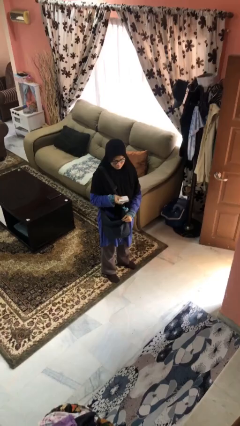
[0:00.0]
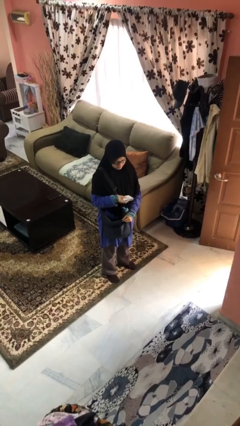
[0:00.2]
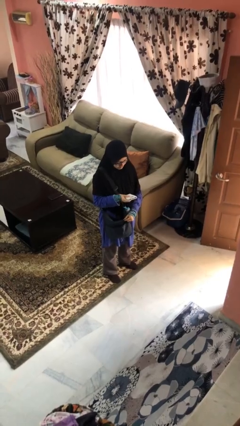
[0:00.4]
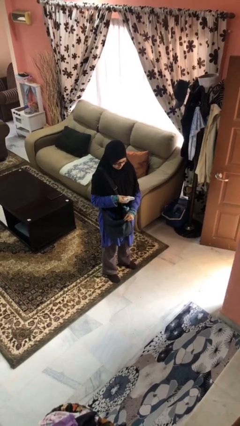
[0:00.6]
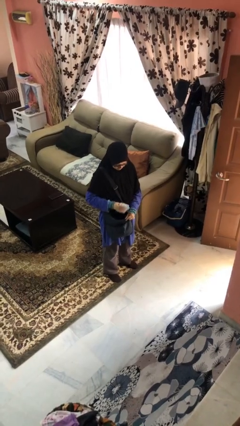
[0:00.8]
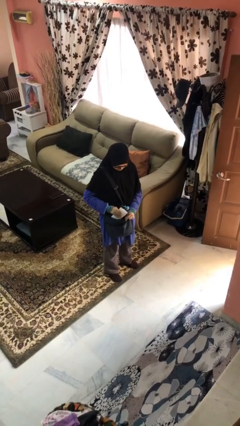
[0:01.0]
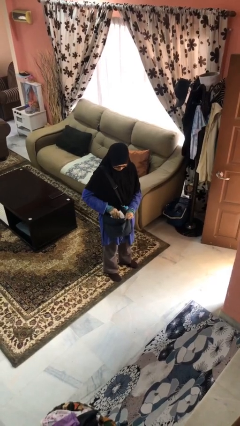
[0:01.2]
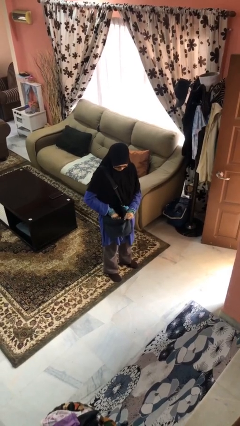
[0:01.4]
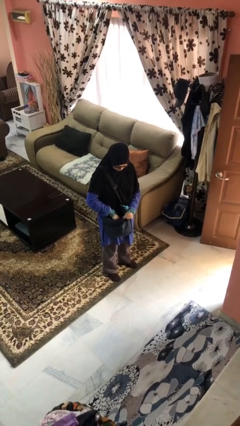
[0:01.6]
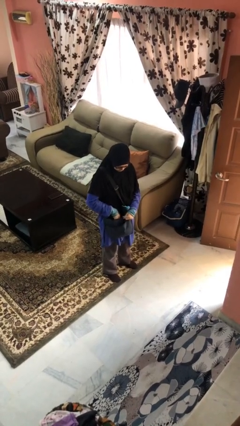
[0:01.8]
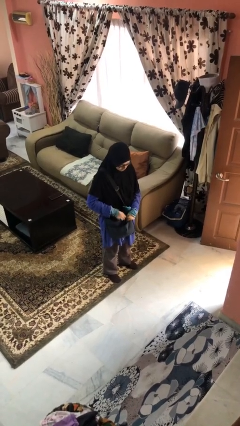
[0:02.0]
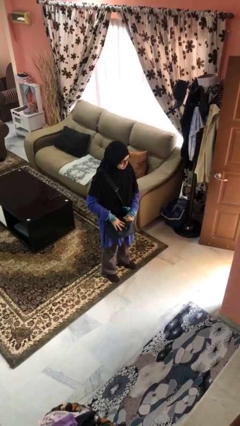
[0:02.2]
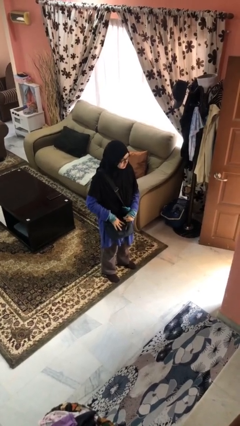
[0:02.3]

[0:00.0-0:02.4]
person puts object into purse

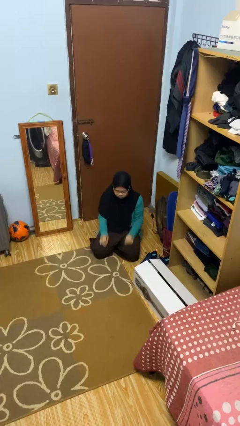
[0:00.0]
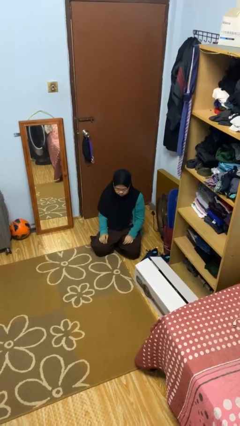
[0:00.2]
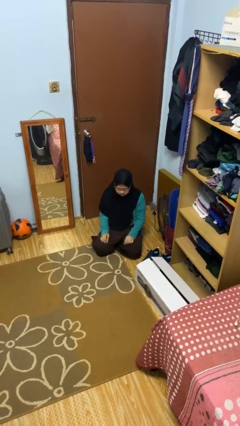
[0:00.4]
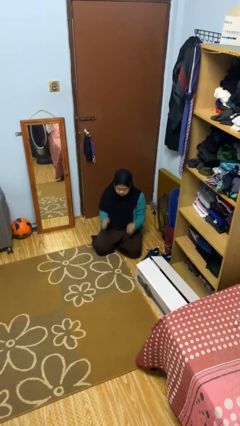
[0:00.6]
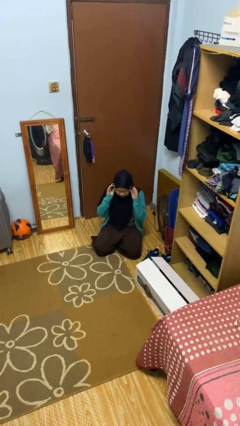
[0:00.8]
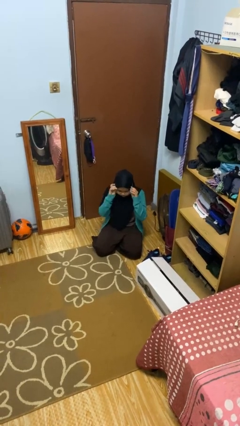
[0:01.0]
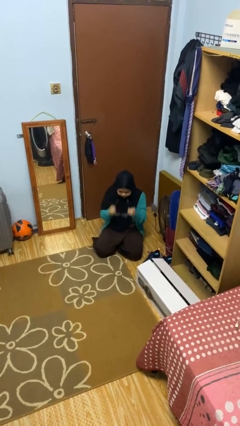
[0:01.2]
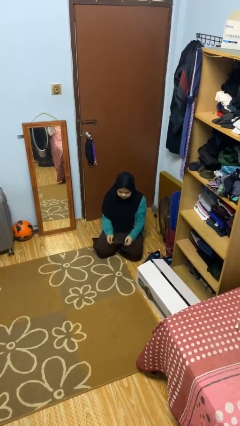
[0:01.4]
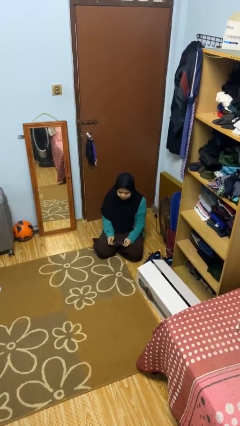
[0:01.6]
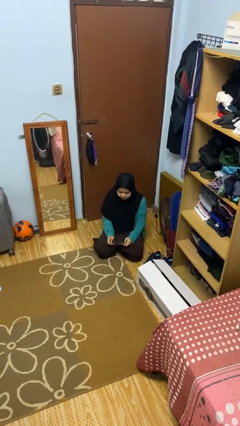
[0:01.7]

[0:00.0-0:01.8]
person takes off glasses

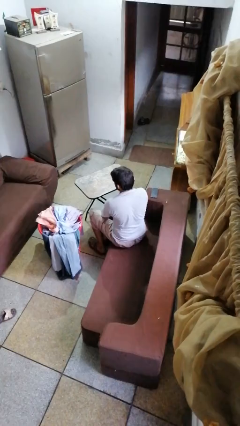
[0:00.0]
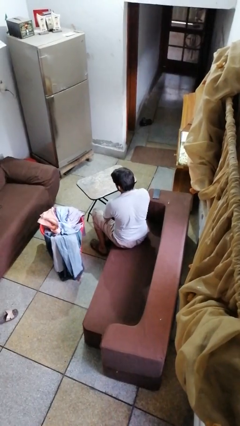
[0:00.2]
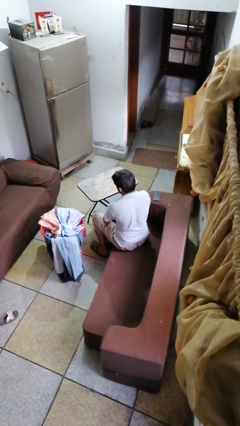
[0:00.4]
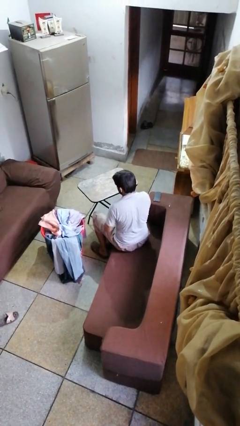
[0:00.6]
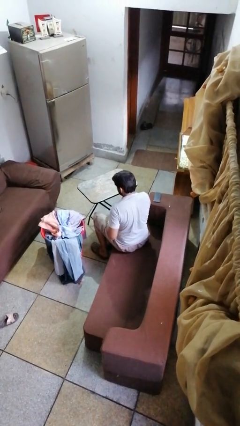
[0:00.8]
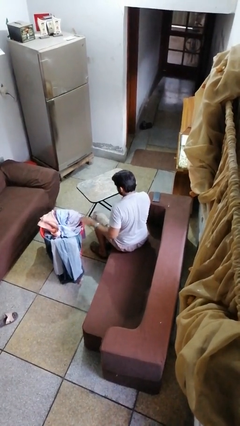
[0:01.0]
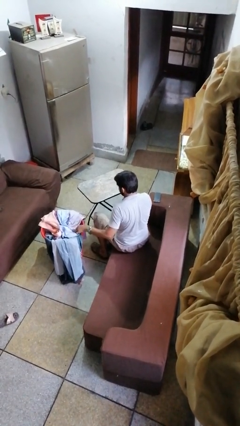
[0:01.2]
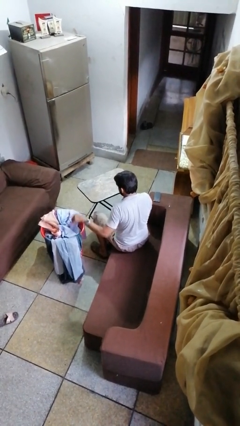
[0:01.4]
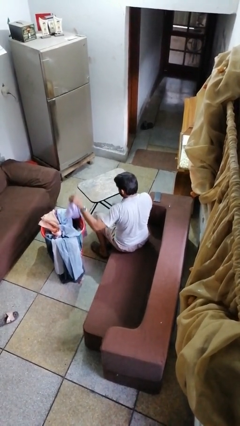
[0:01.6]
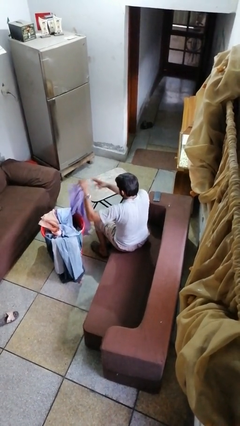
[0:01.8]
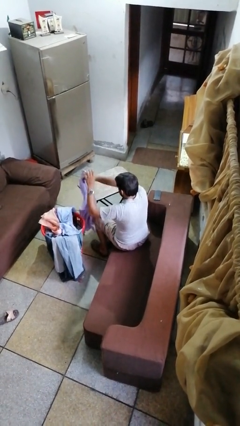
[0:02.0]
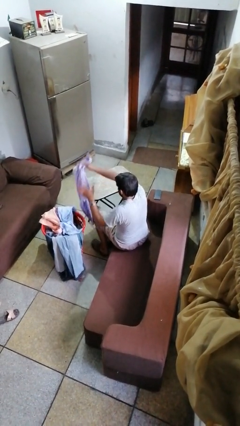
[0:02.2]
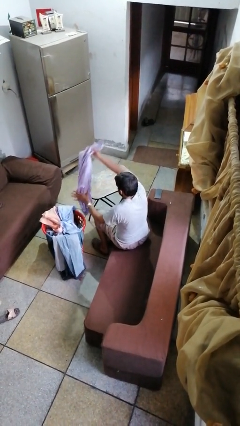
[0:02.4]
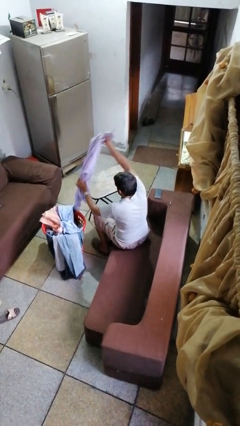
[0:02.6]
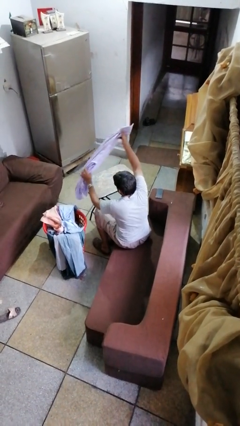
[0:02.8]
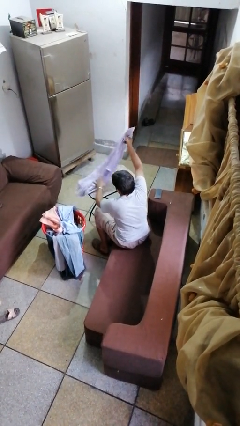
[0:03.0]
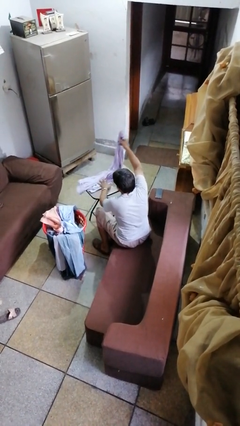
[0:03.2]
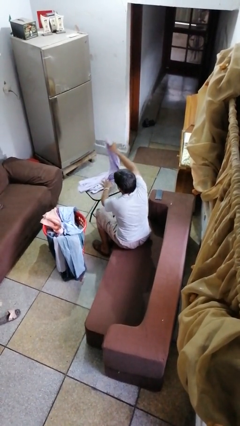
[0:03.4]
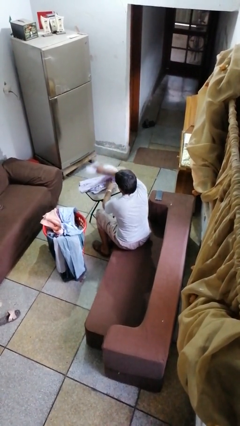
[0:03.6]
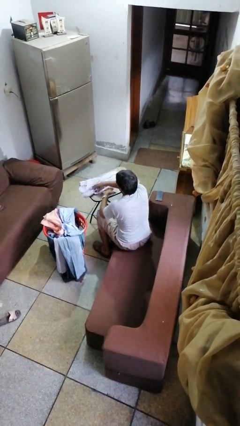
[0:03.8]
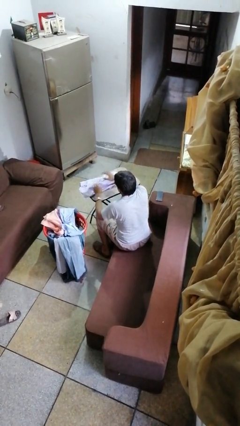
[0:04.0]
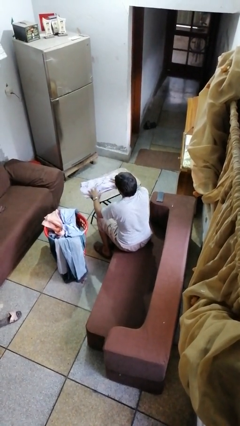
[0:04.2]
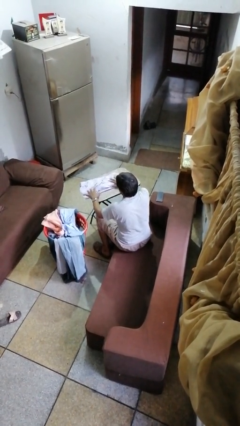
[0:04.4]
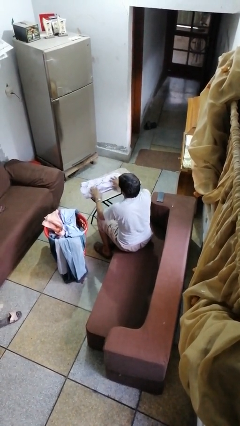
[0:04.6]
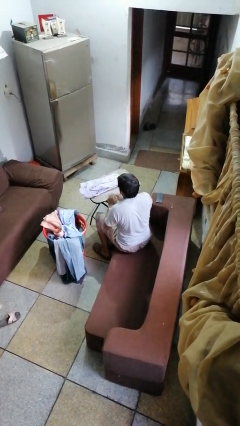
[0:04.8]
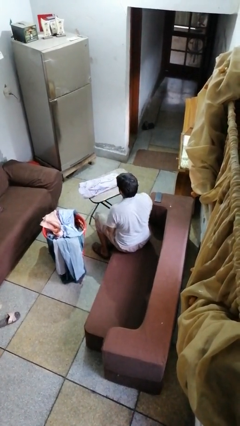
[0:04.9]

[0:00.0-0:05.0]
person folds shirt

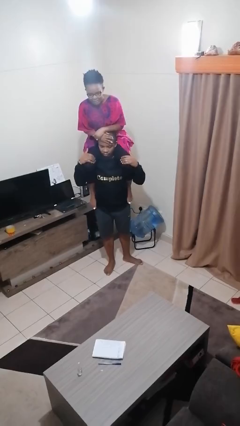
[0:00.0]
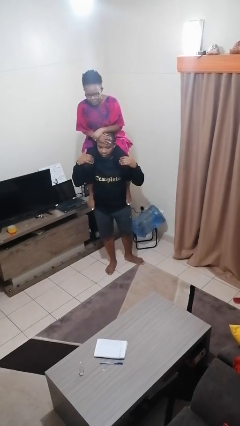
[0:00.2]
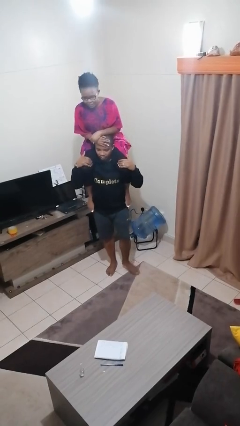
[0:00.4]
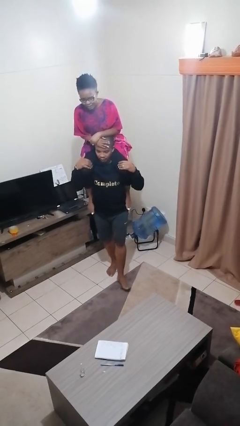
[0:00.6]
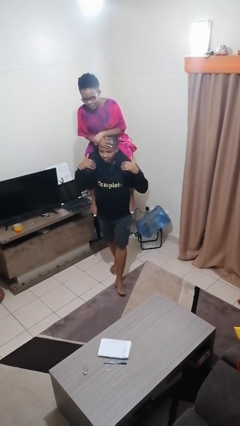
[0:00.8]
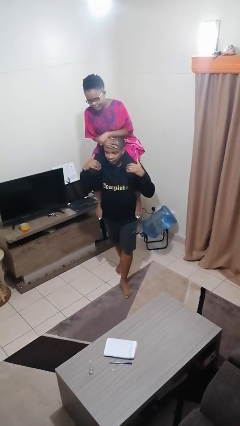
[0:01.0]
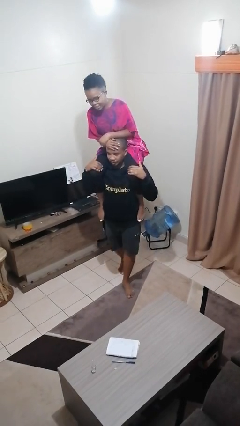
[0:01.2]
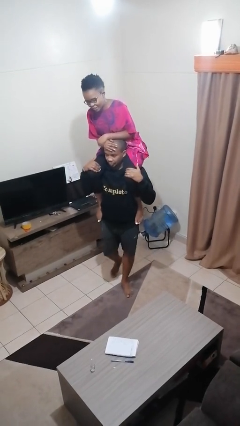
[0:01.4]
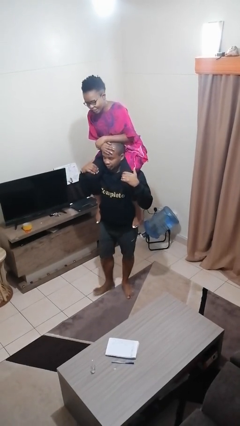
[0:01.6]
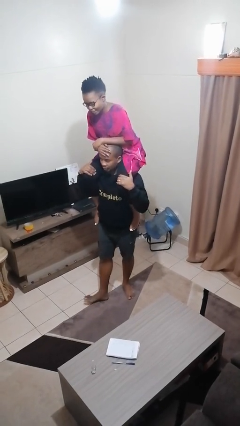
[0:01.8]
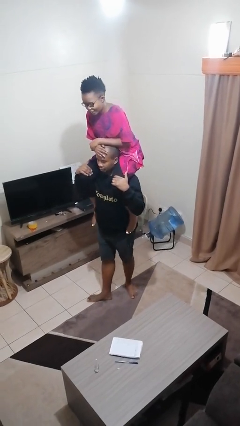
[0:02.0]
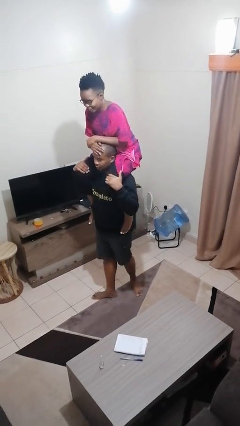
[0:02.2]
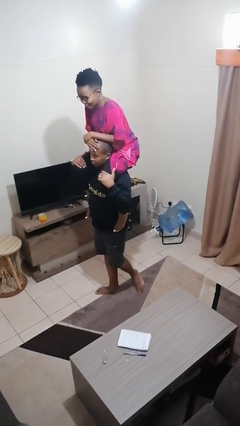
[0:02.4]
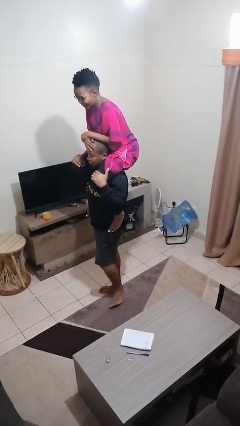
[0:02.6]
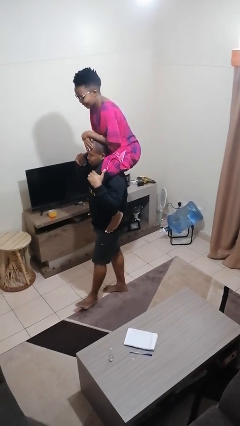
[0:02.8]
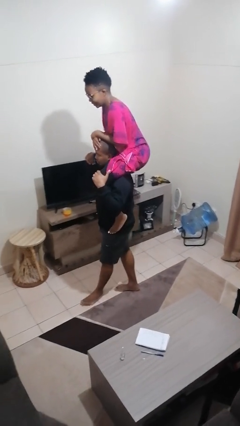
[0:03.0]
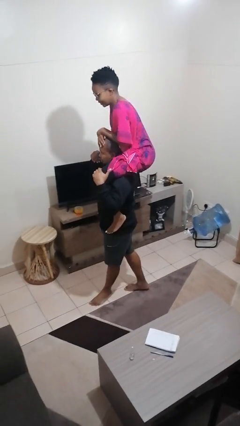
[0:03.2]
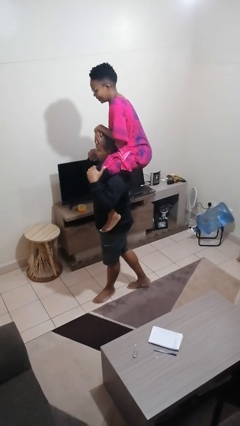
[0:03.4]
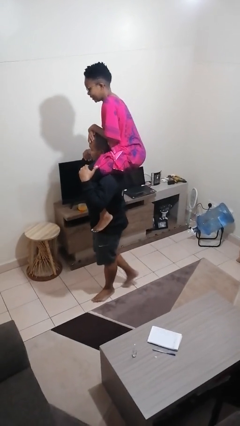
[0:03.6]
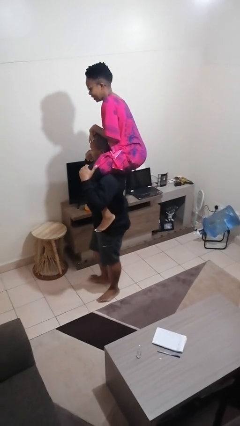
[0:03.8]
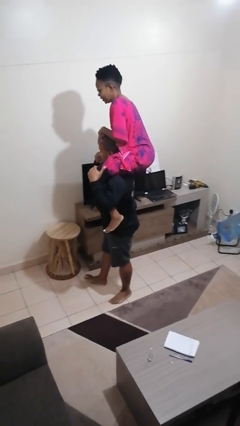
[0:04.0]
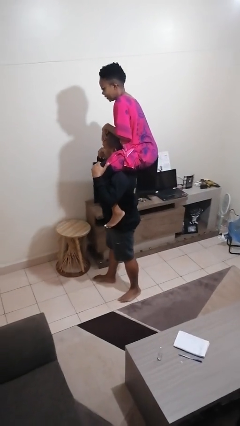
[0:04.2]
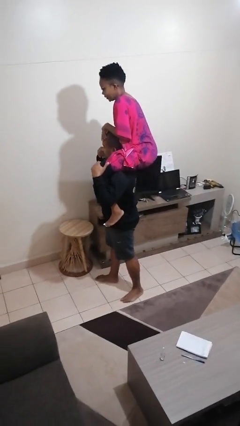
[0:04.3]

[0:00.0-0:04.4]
person carries person on shoulders

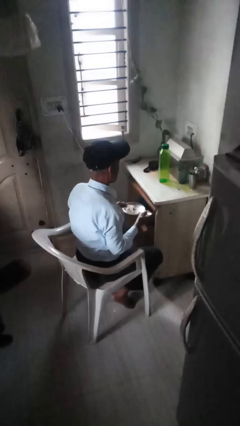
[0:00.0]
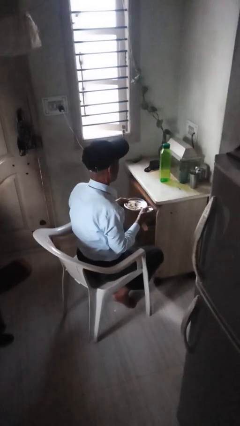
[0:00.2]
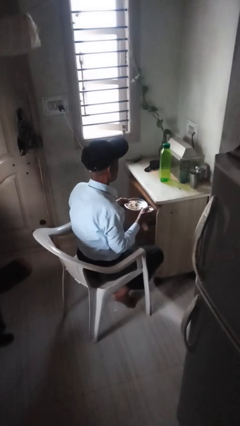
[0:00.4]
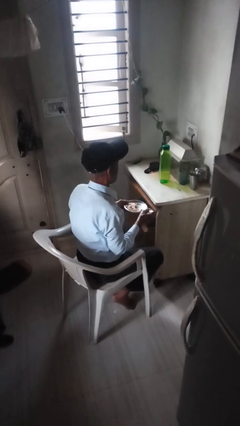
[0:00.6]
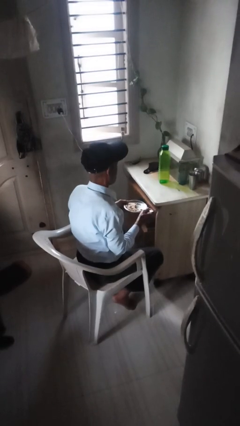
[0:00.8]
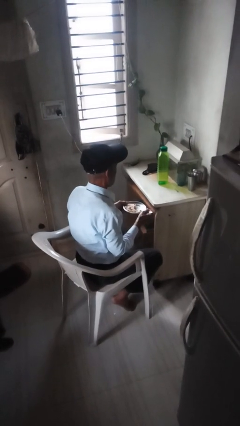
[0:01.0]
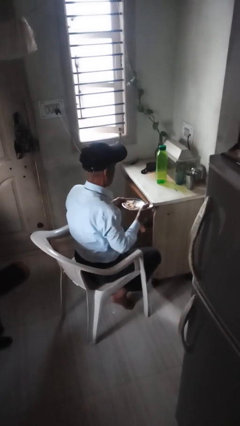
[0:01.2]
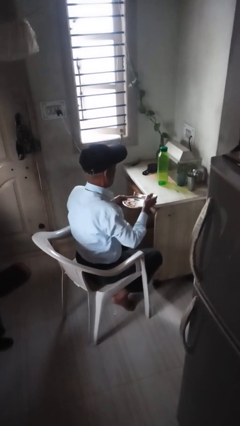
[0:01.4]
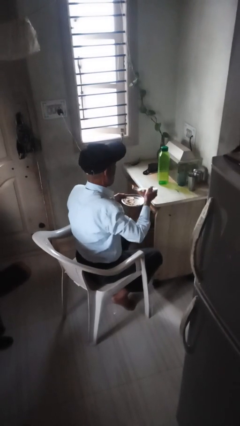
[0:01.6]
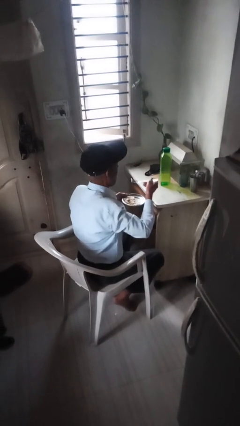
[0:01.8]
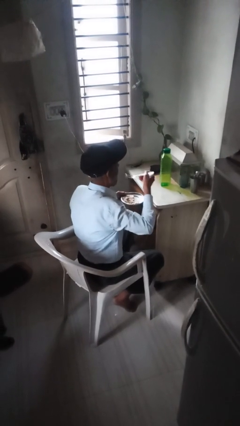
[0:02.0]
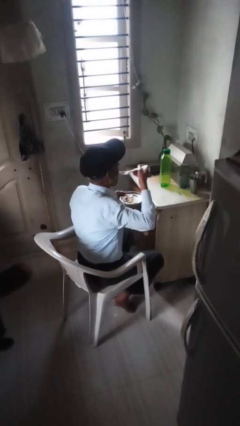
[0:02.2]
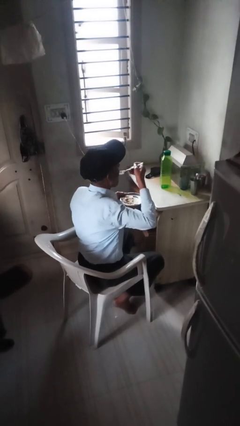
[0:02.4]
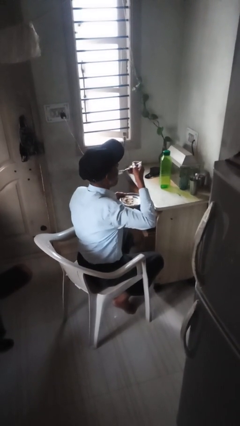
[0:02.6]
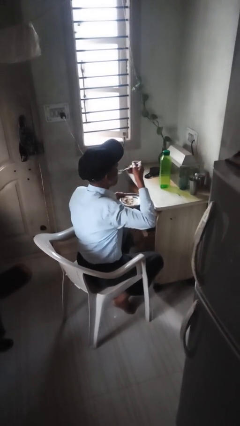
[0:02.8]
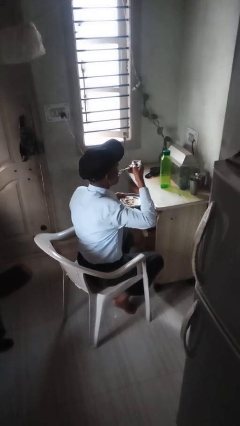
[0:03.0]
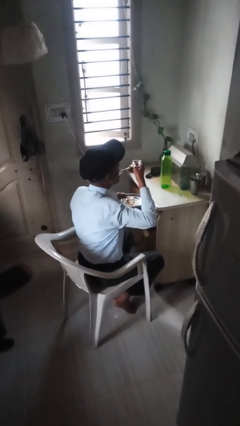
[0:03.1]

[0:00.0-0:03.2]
person eats with utensil

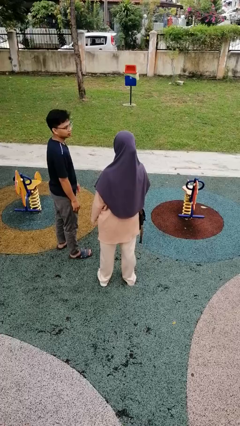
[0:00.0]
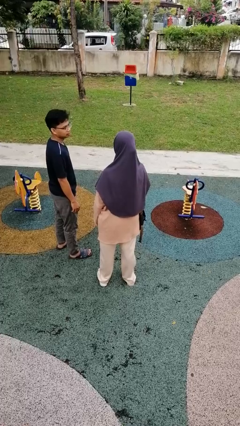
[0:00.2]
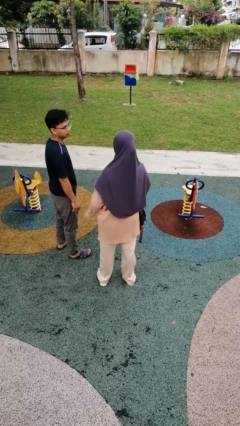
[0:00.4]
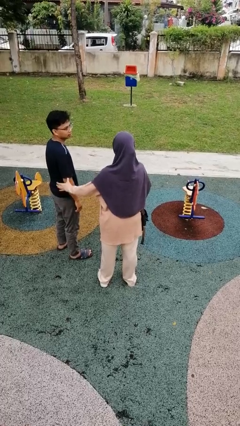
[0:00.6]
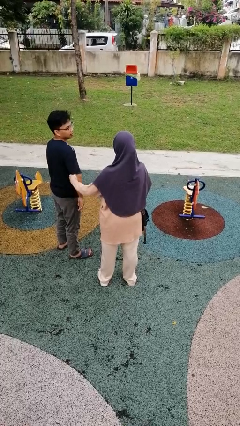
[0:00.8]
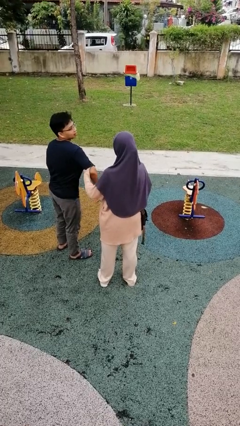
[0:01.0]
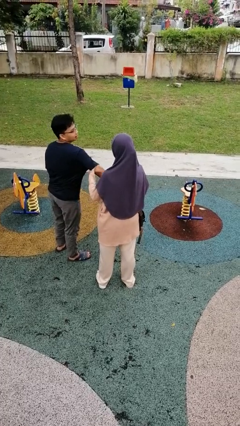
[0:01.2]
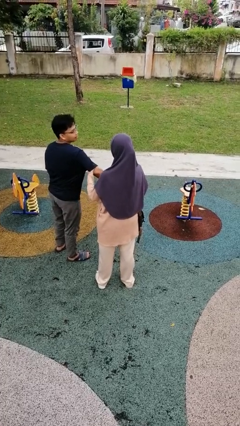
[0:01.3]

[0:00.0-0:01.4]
person grabs person by bicep
